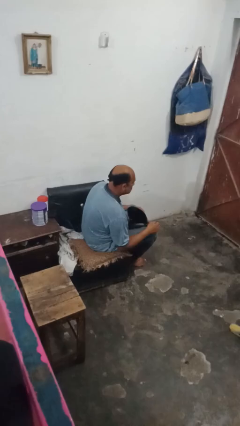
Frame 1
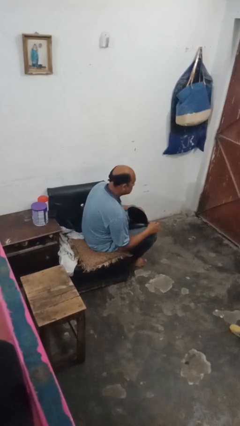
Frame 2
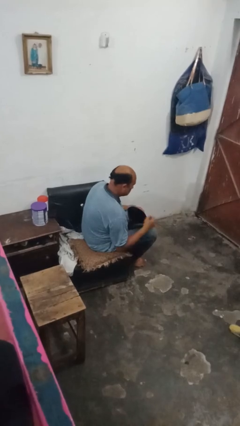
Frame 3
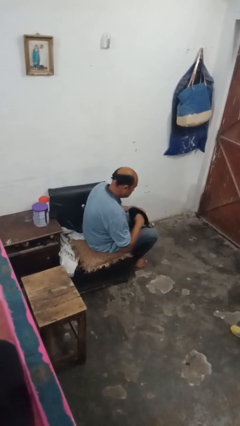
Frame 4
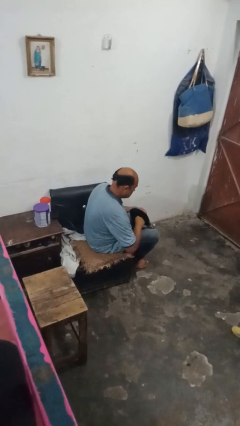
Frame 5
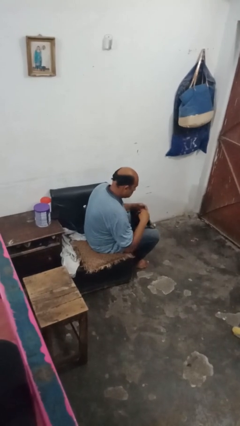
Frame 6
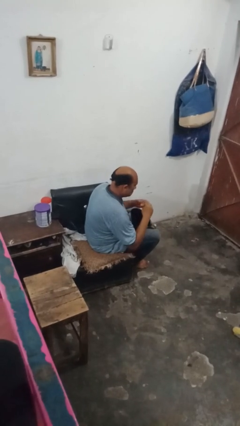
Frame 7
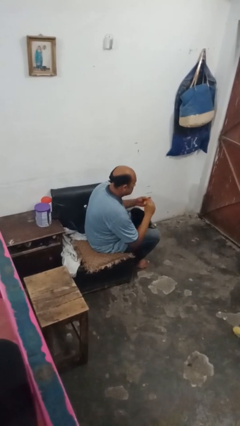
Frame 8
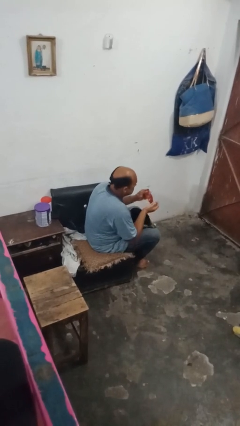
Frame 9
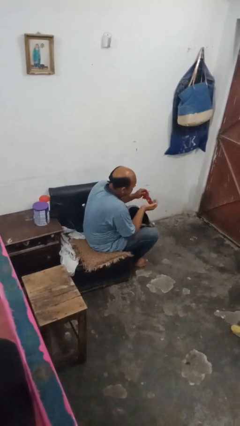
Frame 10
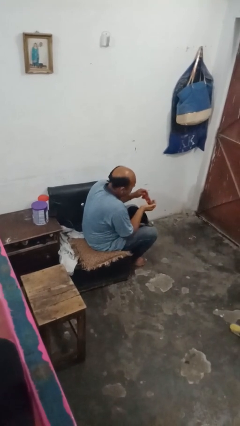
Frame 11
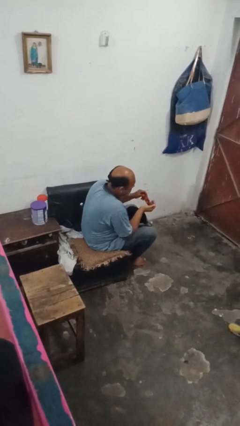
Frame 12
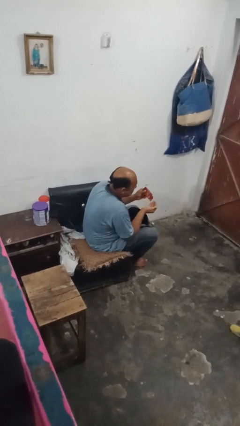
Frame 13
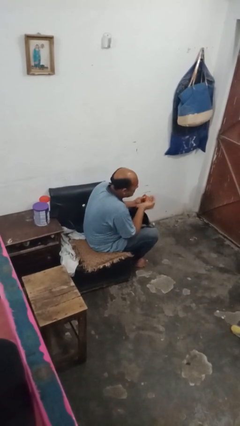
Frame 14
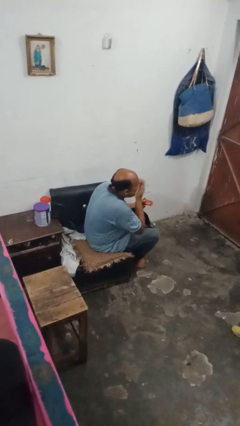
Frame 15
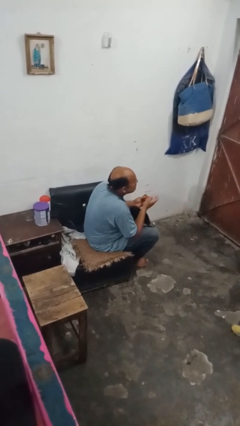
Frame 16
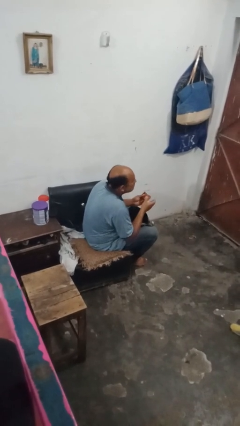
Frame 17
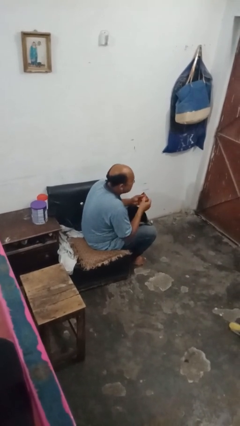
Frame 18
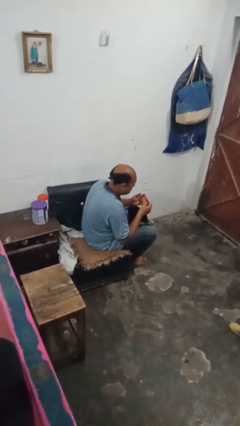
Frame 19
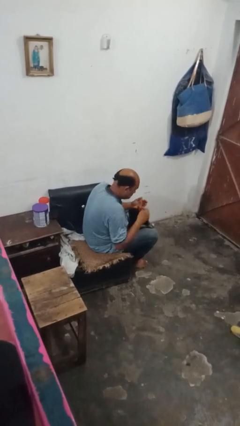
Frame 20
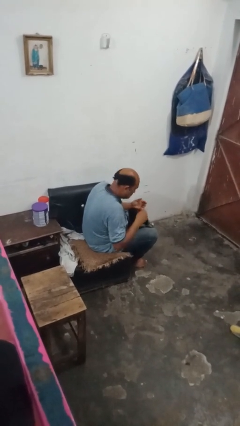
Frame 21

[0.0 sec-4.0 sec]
person eats snack from bag

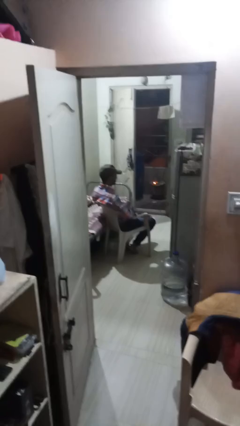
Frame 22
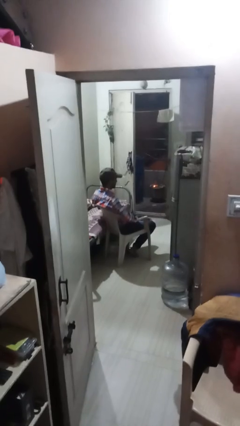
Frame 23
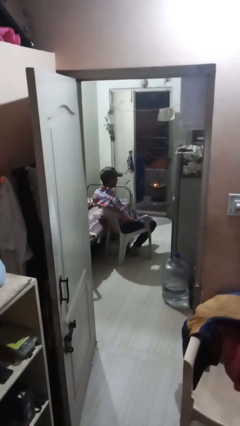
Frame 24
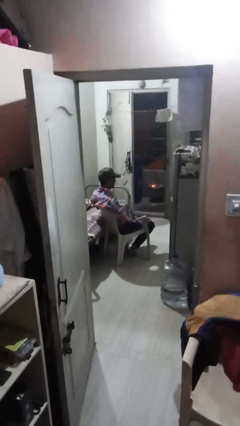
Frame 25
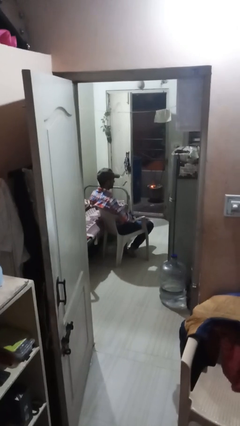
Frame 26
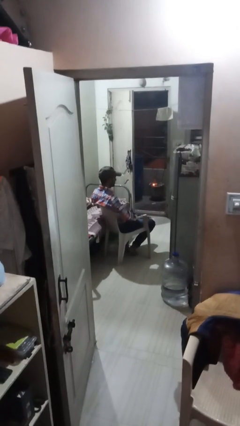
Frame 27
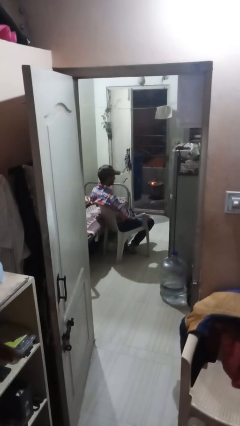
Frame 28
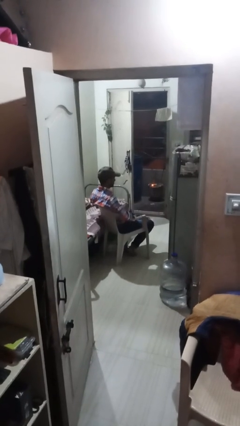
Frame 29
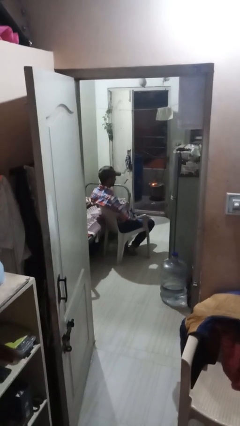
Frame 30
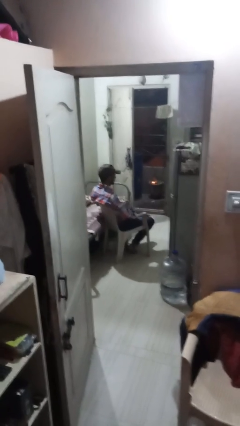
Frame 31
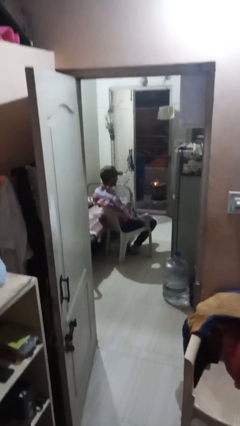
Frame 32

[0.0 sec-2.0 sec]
person snaps fingers

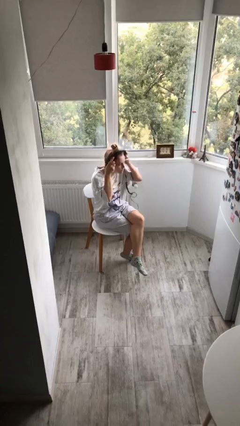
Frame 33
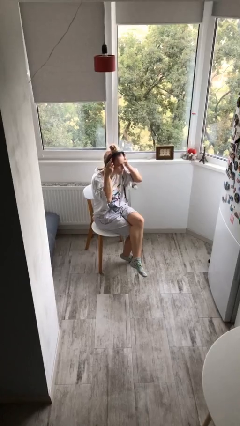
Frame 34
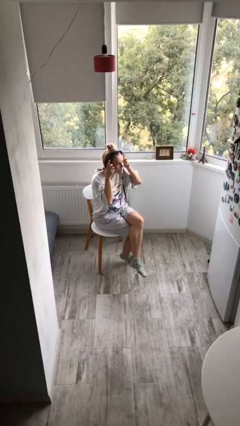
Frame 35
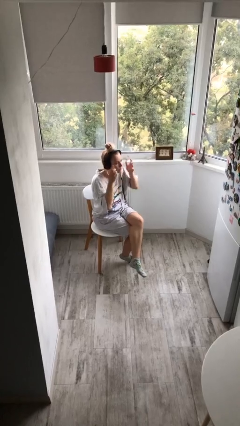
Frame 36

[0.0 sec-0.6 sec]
person puts on headphones

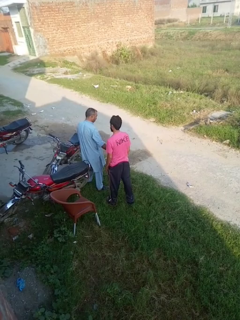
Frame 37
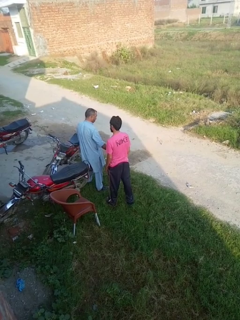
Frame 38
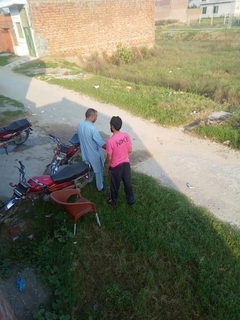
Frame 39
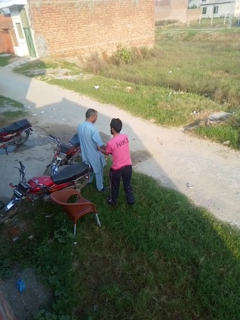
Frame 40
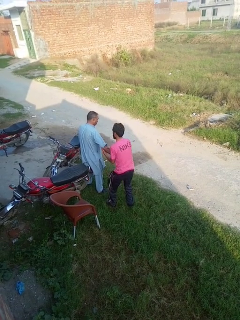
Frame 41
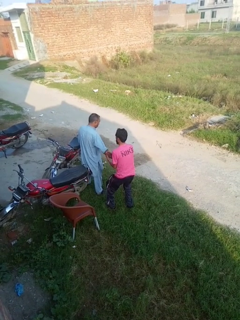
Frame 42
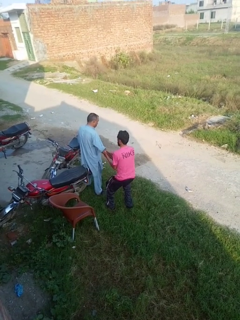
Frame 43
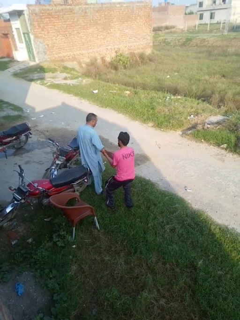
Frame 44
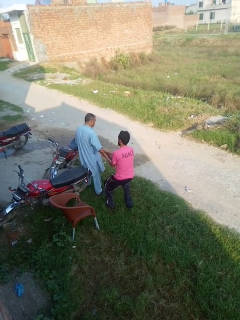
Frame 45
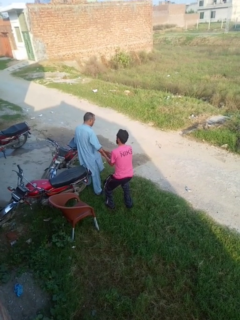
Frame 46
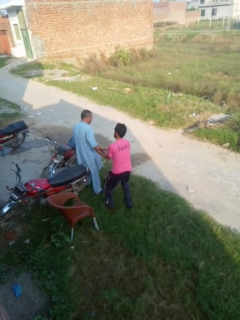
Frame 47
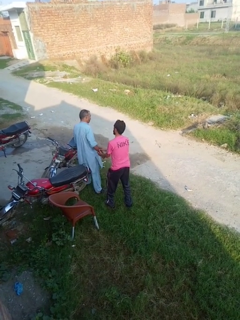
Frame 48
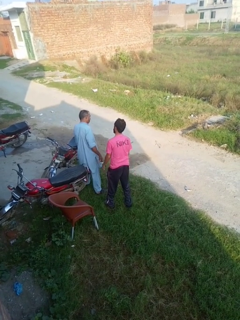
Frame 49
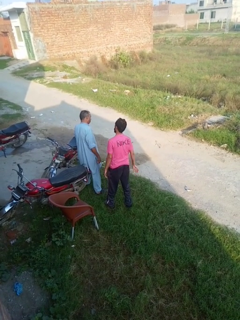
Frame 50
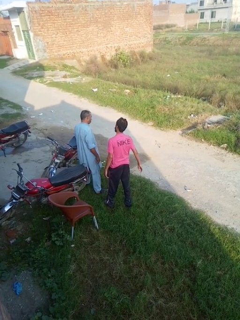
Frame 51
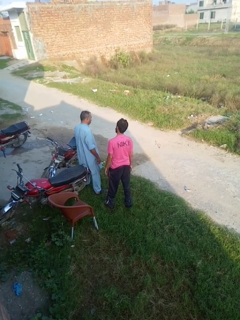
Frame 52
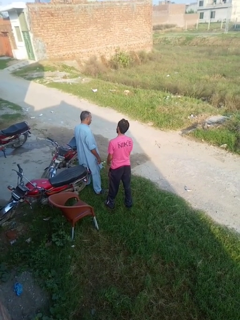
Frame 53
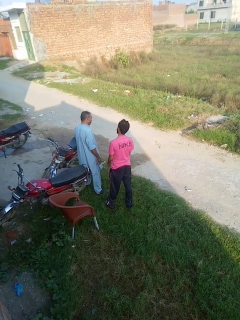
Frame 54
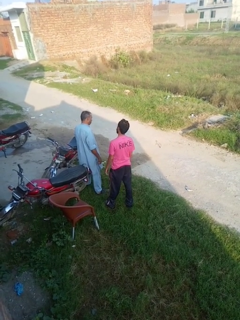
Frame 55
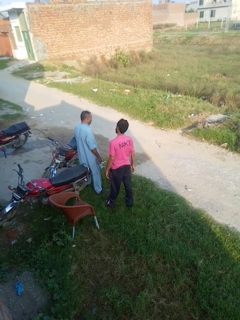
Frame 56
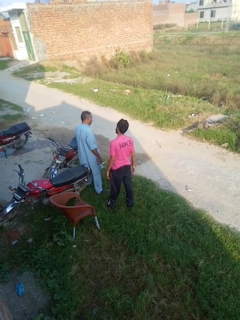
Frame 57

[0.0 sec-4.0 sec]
person grabs person by forearm

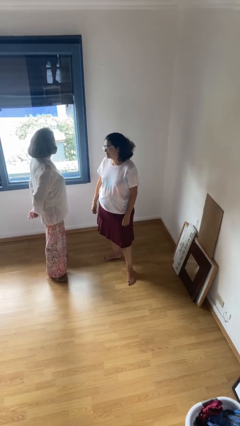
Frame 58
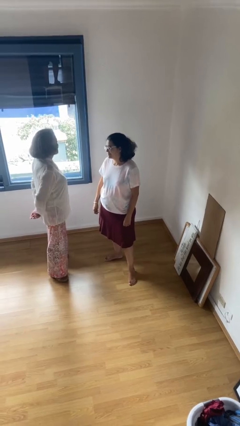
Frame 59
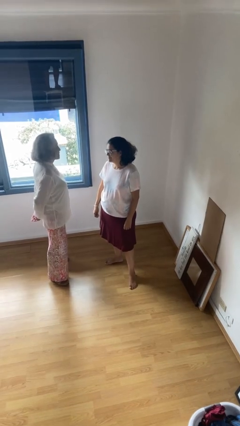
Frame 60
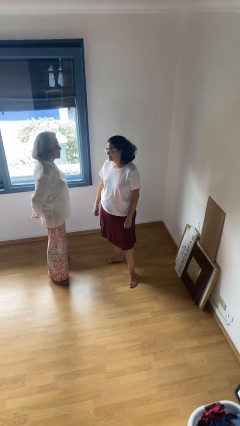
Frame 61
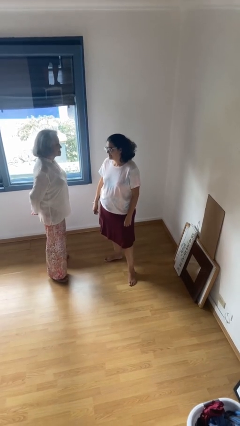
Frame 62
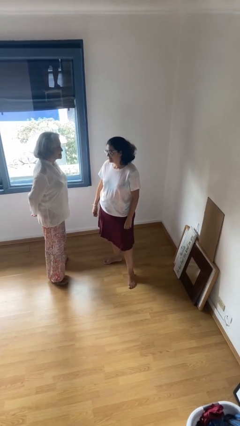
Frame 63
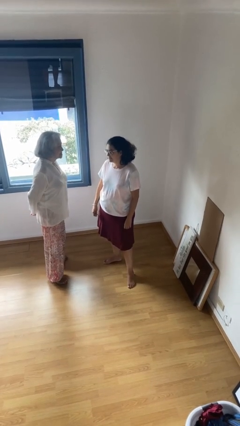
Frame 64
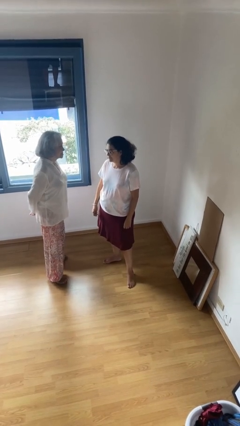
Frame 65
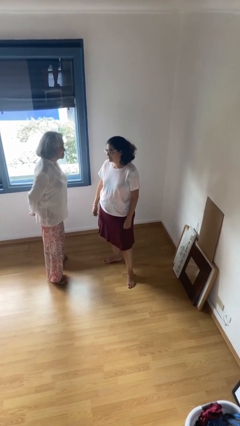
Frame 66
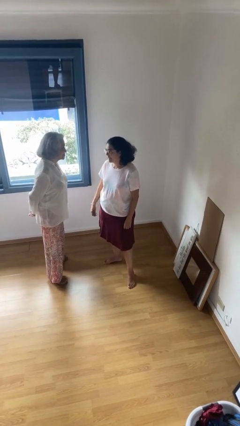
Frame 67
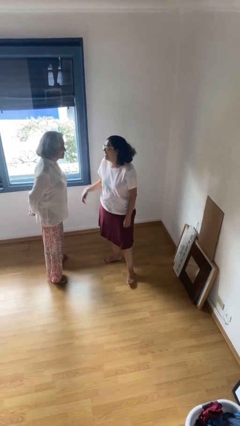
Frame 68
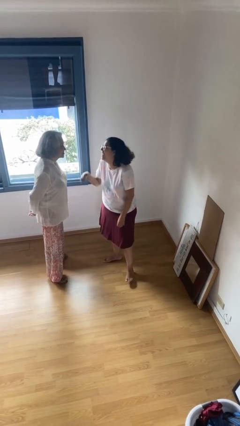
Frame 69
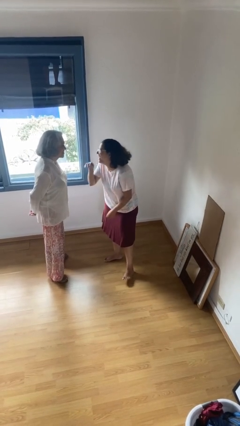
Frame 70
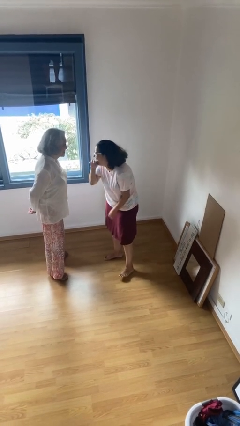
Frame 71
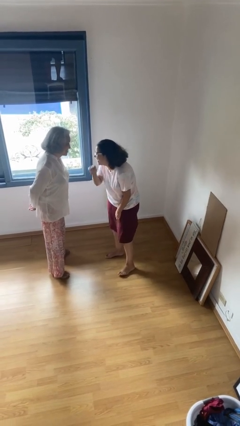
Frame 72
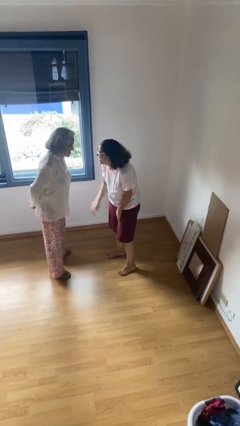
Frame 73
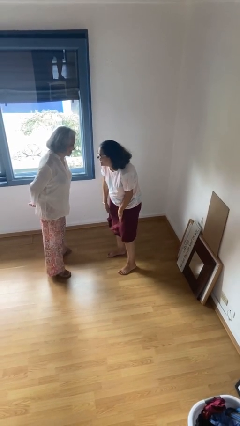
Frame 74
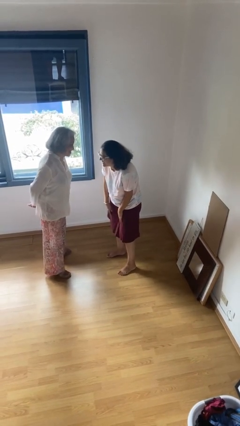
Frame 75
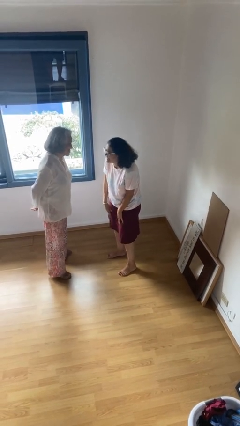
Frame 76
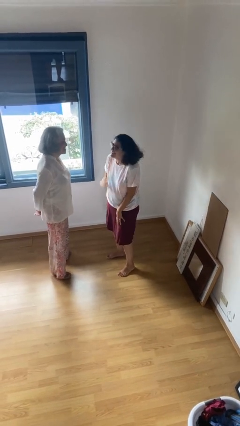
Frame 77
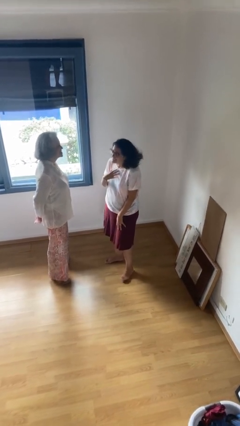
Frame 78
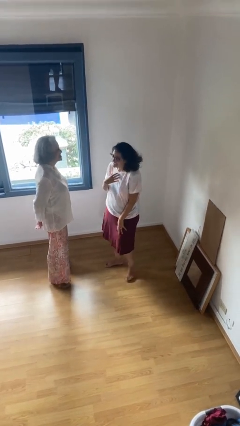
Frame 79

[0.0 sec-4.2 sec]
person laughs with person

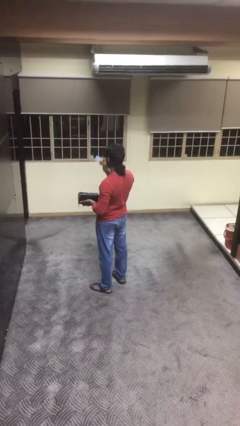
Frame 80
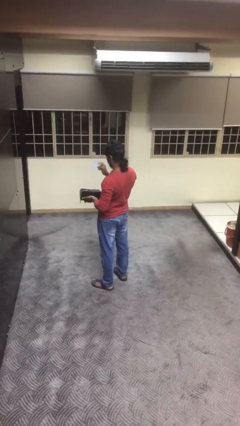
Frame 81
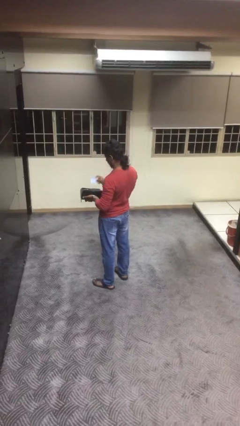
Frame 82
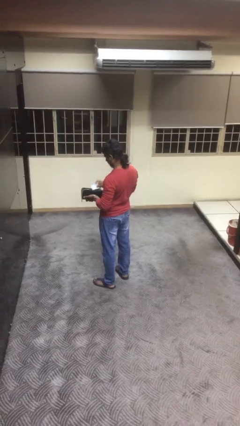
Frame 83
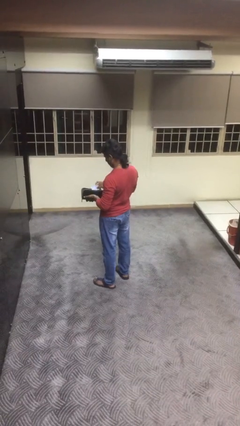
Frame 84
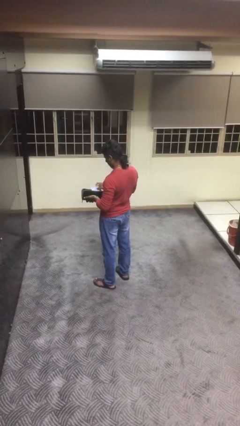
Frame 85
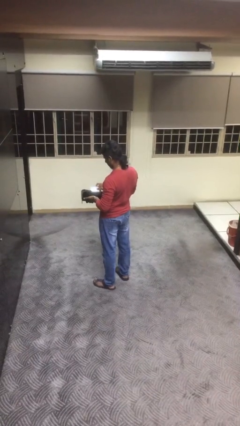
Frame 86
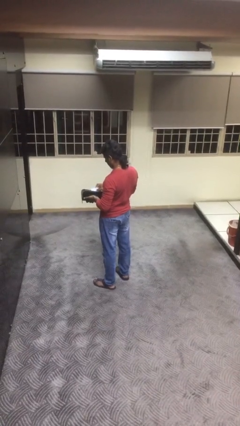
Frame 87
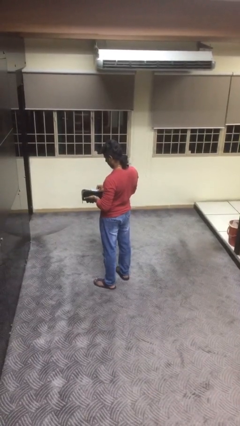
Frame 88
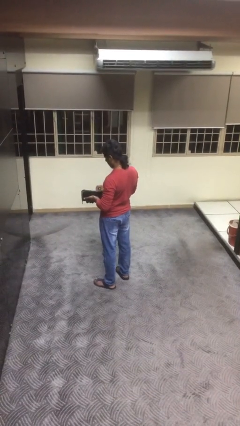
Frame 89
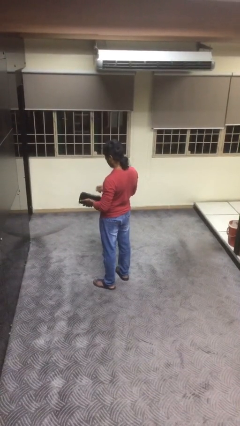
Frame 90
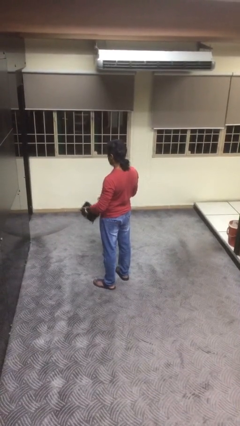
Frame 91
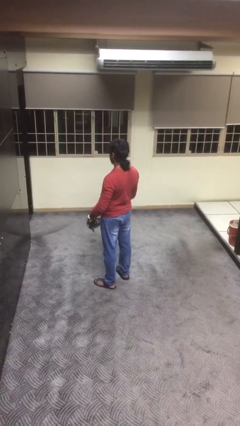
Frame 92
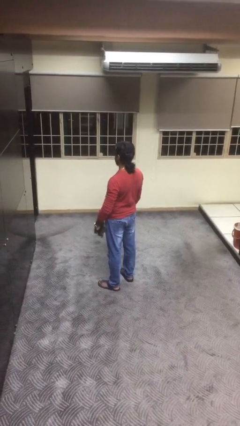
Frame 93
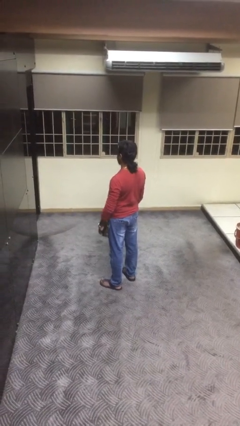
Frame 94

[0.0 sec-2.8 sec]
person puts object into purse

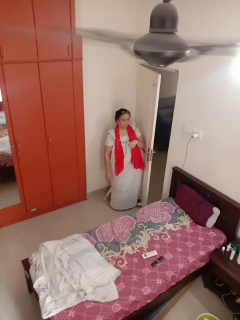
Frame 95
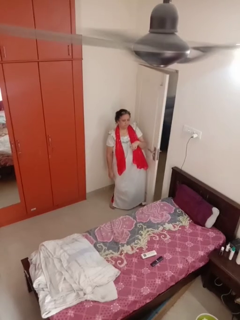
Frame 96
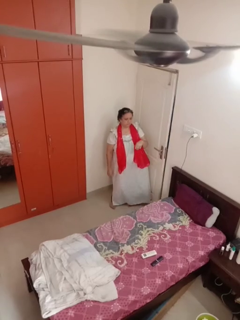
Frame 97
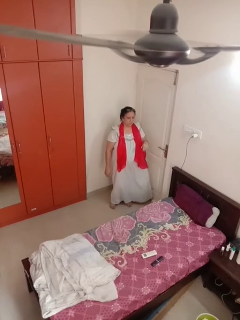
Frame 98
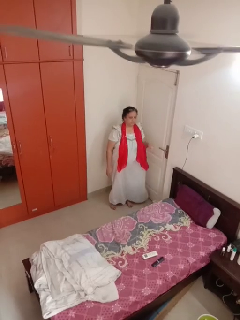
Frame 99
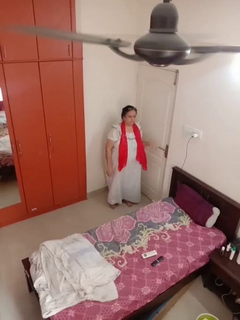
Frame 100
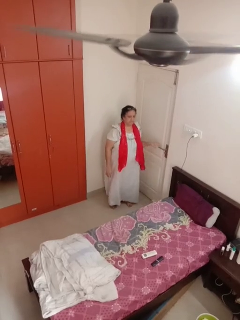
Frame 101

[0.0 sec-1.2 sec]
person closes door with hip
